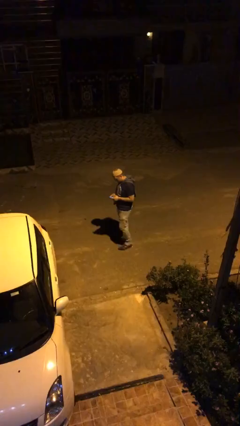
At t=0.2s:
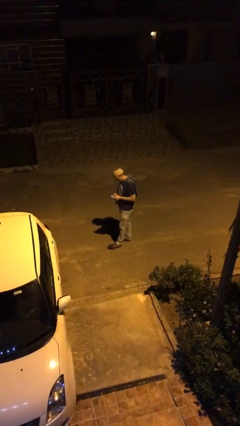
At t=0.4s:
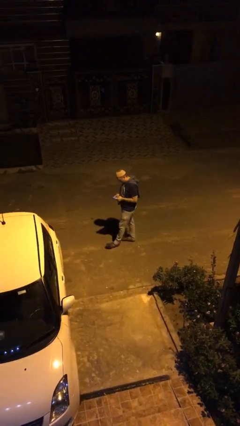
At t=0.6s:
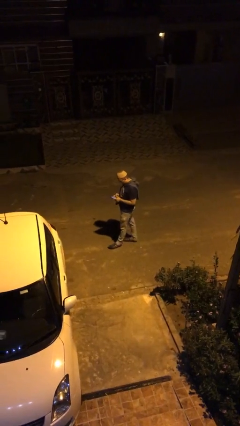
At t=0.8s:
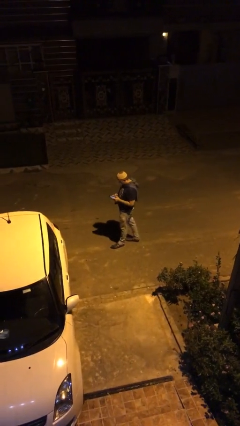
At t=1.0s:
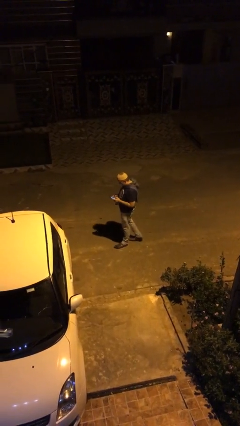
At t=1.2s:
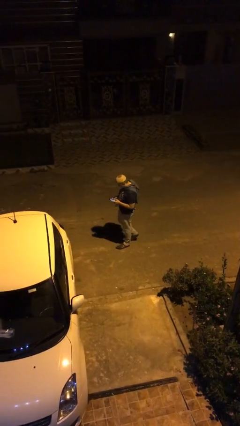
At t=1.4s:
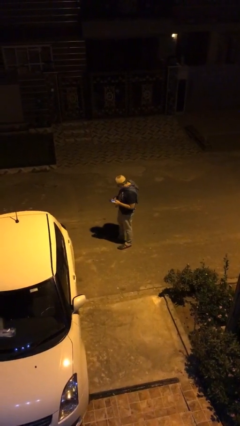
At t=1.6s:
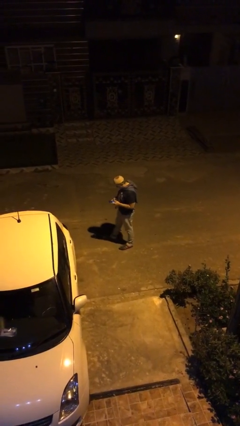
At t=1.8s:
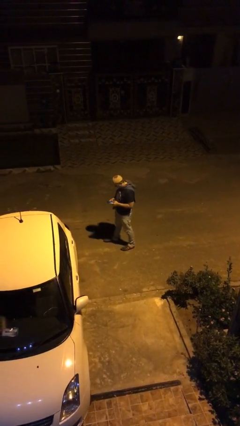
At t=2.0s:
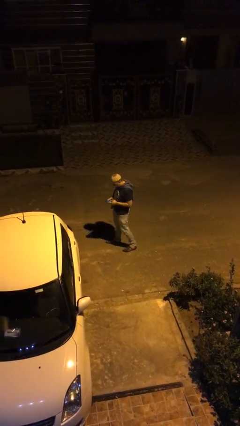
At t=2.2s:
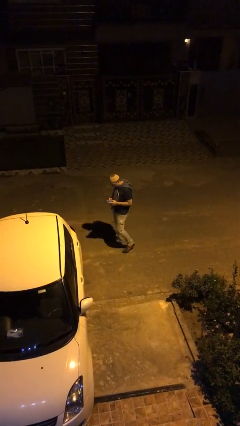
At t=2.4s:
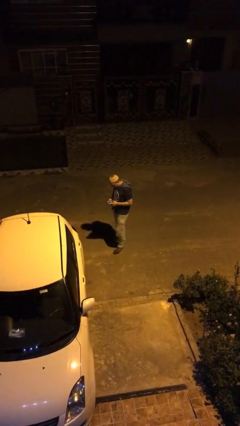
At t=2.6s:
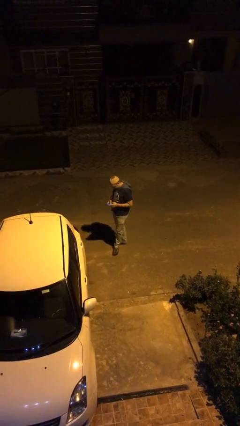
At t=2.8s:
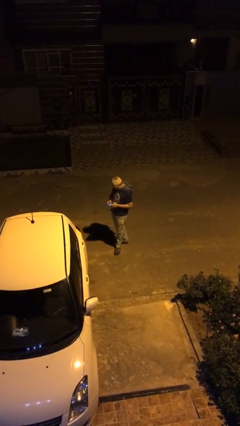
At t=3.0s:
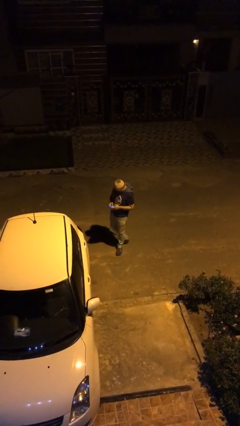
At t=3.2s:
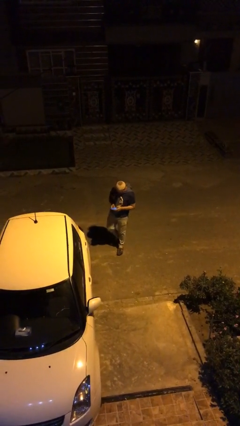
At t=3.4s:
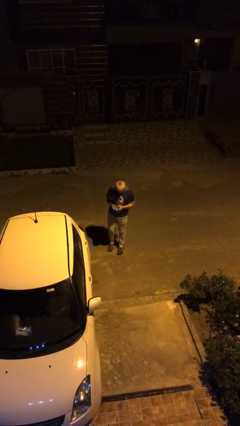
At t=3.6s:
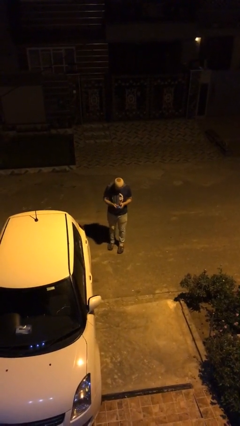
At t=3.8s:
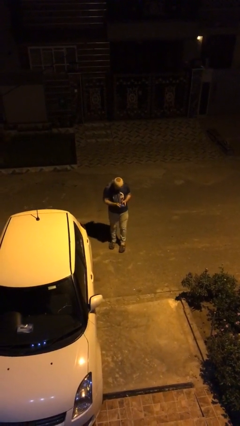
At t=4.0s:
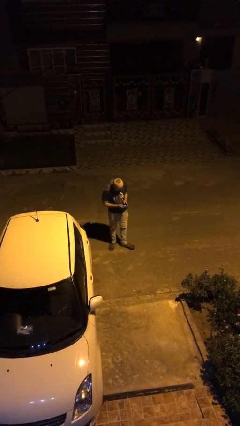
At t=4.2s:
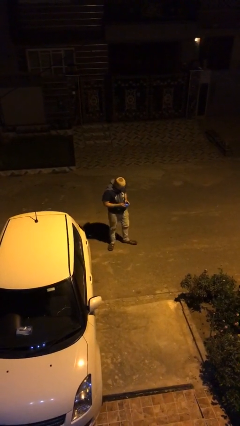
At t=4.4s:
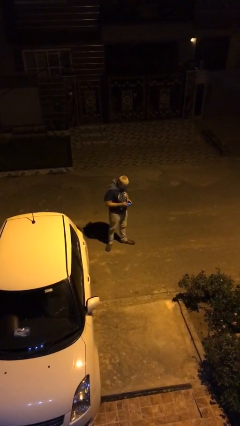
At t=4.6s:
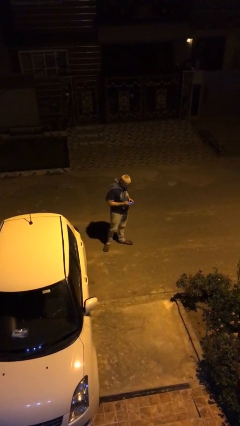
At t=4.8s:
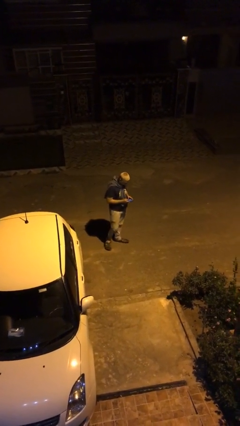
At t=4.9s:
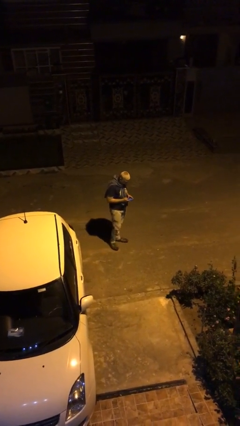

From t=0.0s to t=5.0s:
person texts on phone

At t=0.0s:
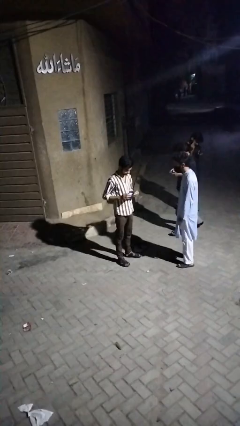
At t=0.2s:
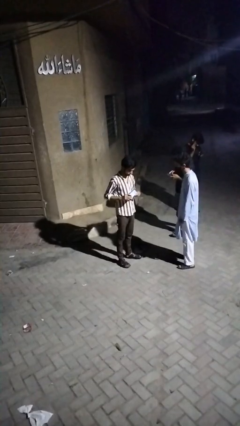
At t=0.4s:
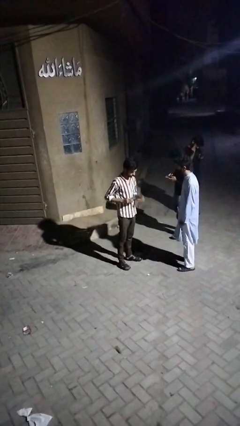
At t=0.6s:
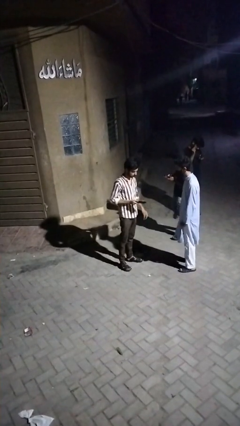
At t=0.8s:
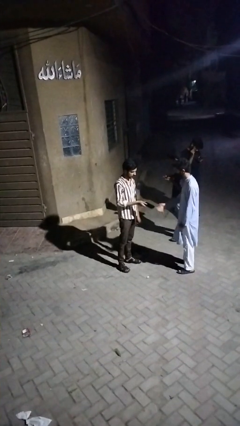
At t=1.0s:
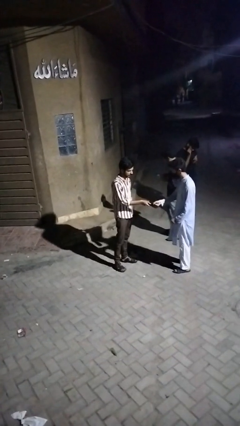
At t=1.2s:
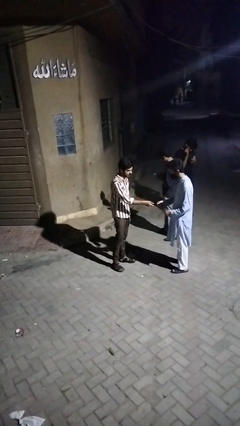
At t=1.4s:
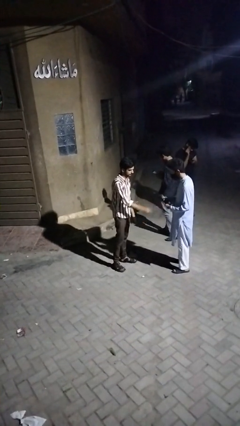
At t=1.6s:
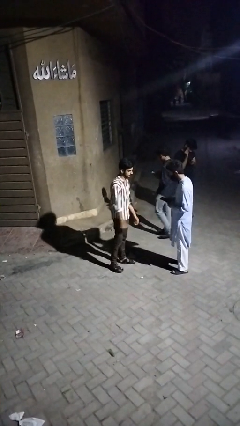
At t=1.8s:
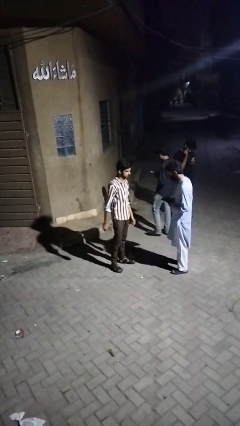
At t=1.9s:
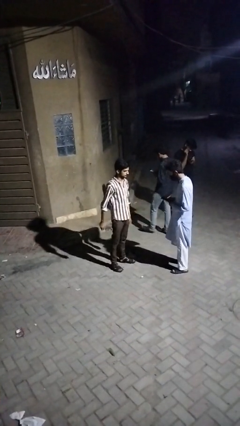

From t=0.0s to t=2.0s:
person transfers object to person

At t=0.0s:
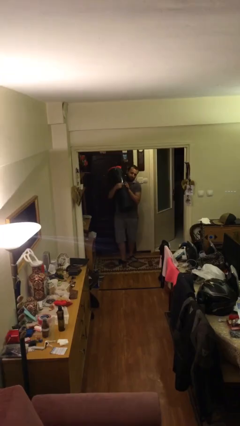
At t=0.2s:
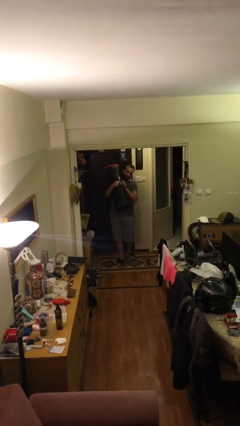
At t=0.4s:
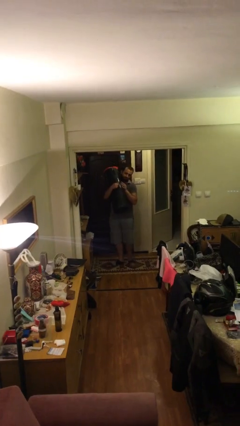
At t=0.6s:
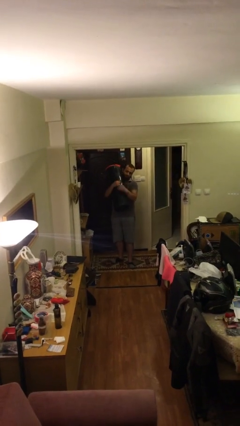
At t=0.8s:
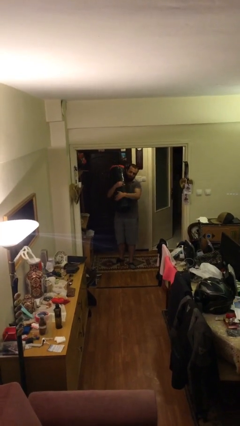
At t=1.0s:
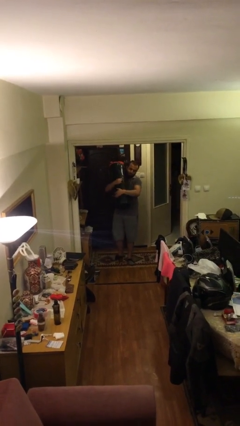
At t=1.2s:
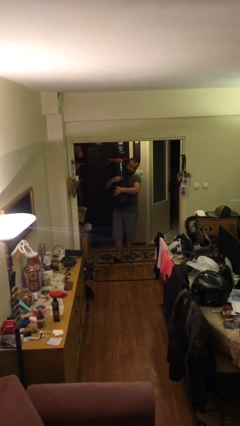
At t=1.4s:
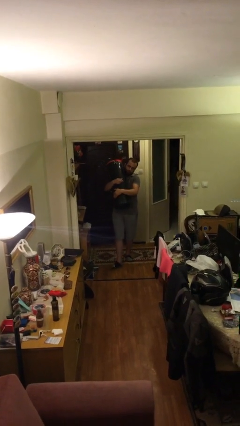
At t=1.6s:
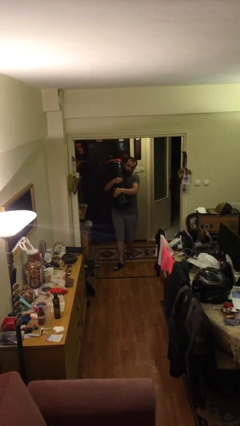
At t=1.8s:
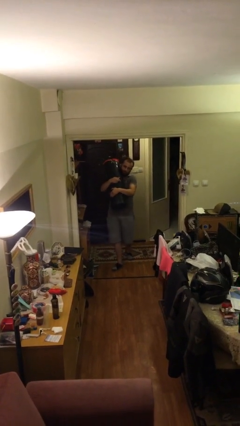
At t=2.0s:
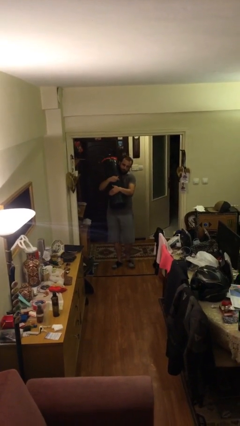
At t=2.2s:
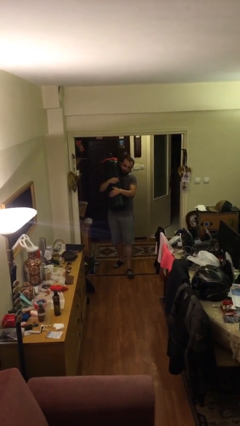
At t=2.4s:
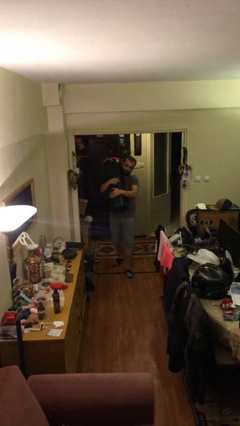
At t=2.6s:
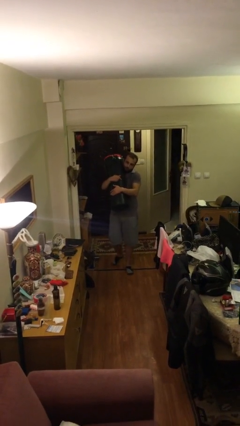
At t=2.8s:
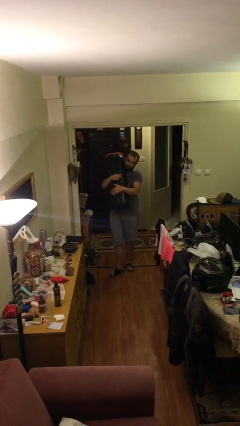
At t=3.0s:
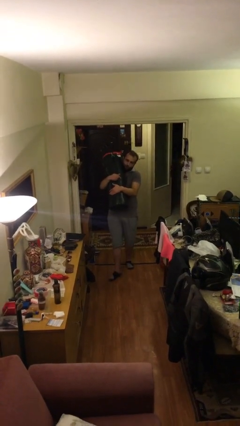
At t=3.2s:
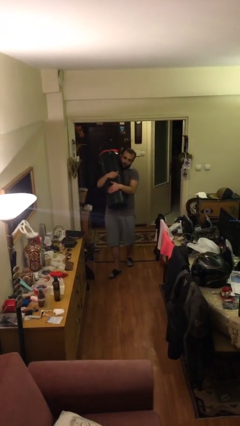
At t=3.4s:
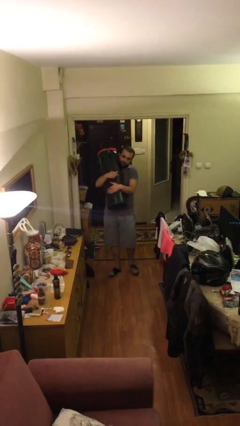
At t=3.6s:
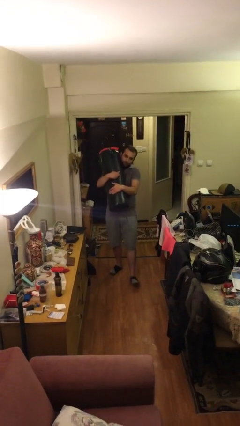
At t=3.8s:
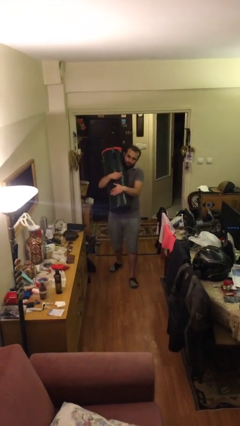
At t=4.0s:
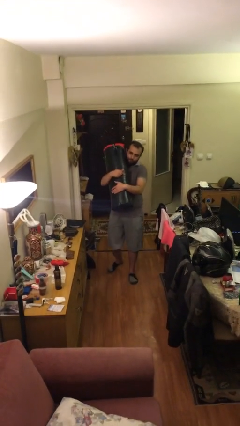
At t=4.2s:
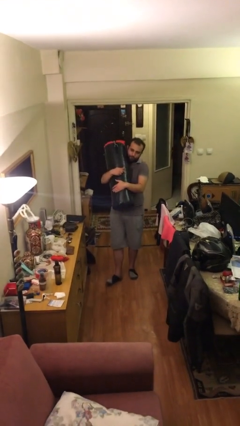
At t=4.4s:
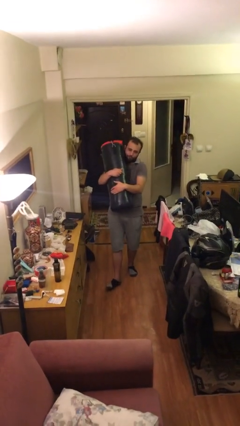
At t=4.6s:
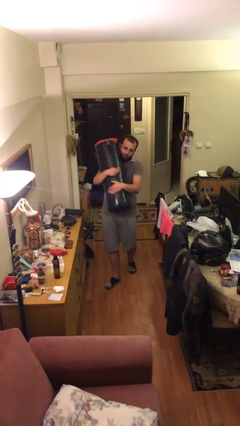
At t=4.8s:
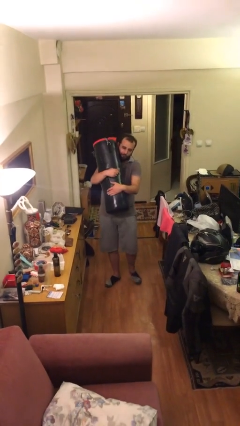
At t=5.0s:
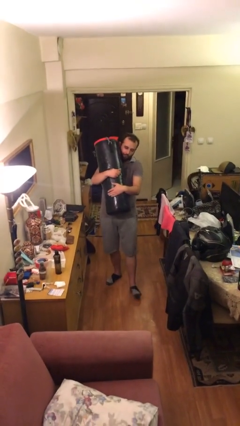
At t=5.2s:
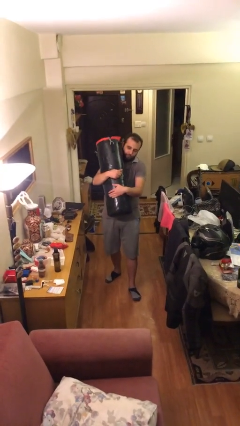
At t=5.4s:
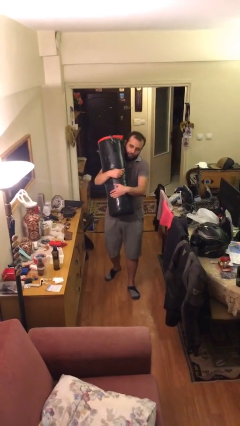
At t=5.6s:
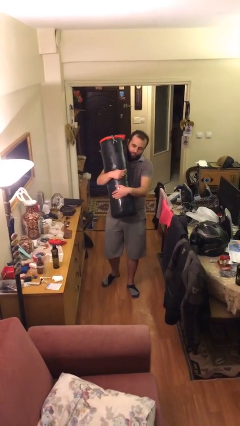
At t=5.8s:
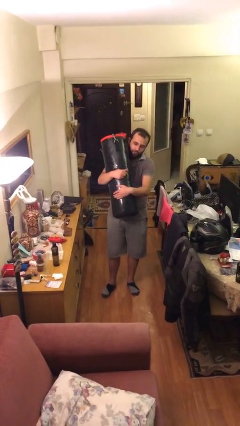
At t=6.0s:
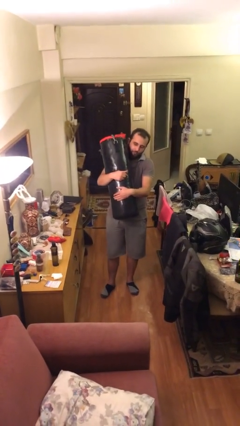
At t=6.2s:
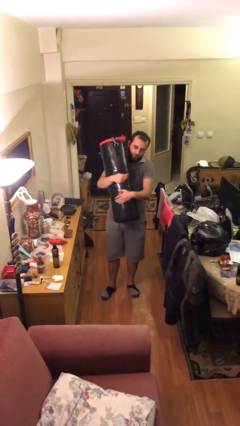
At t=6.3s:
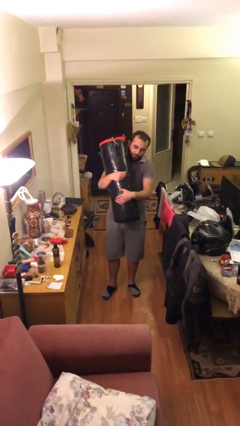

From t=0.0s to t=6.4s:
person carries heavy object

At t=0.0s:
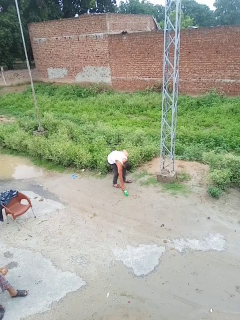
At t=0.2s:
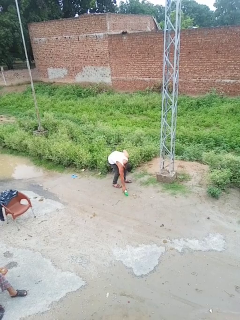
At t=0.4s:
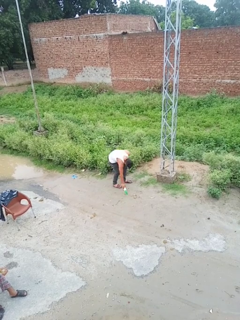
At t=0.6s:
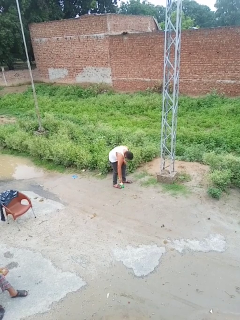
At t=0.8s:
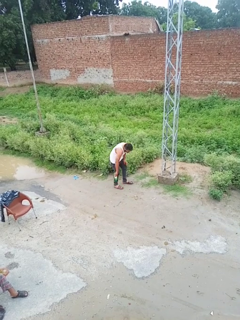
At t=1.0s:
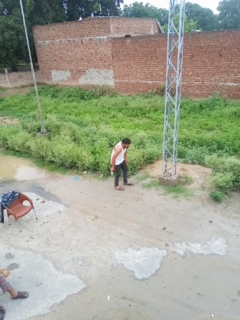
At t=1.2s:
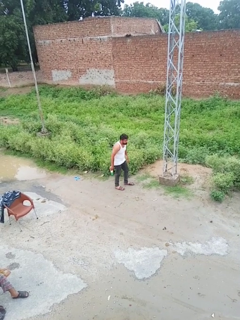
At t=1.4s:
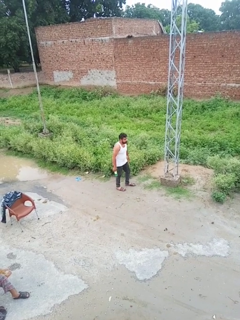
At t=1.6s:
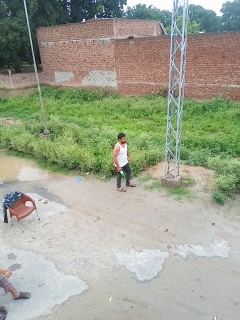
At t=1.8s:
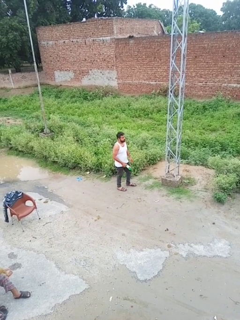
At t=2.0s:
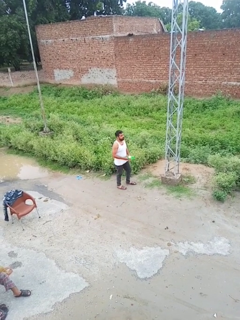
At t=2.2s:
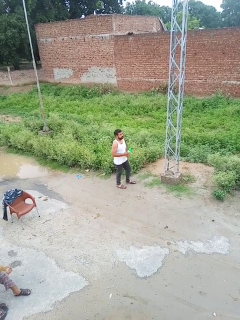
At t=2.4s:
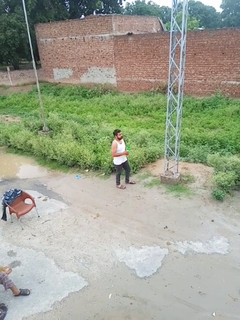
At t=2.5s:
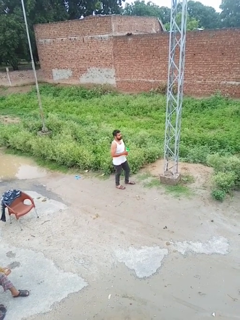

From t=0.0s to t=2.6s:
person picks up object from floor

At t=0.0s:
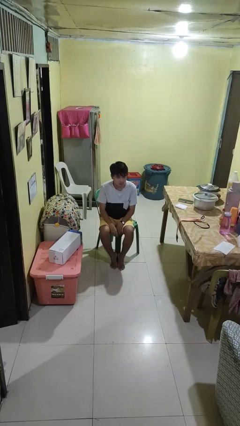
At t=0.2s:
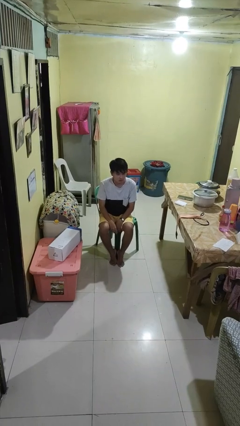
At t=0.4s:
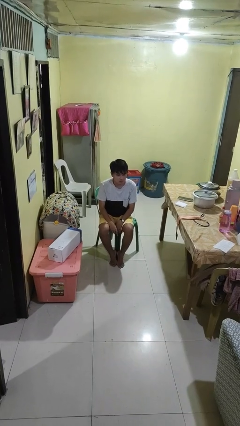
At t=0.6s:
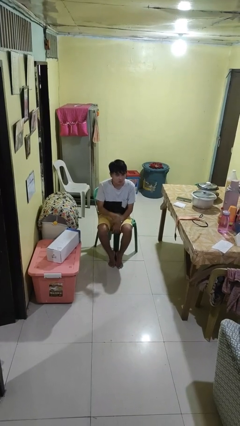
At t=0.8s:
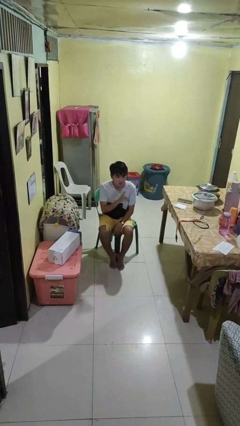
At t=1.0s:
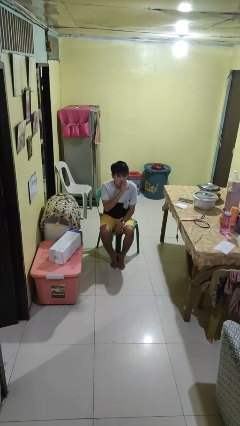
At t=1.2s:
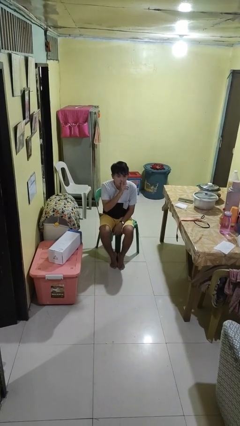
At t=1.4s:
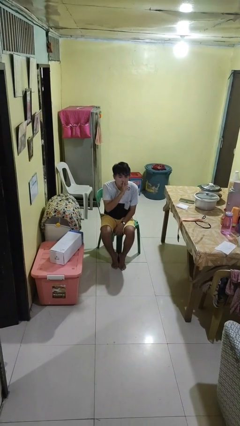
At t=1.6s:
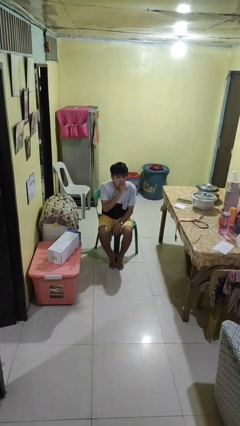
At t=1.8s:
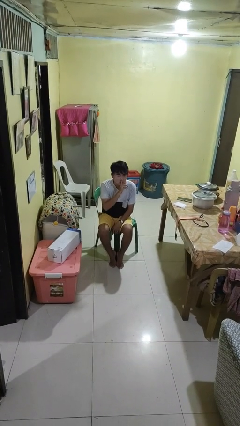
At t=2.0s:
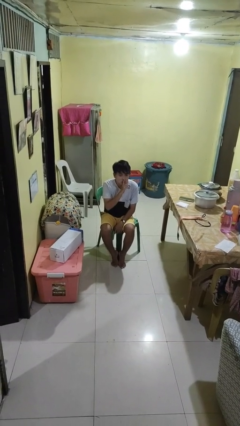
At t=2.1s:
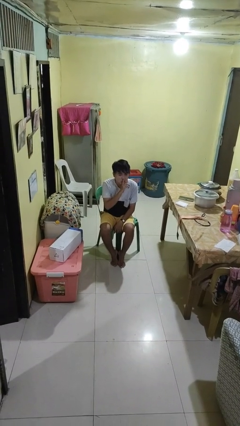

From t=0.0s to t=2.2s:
person gestures be quiet
